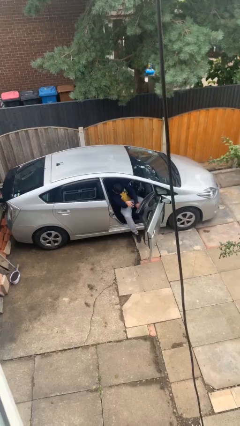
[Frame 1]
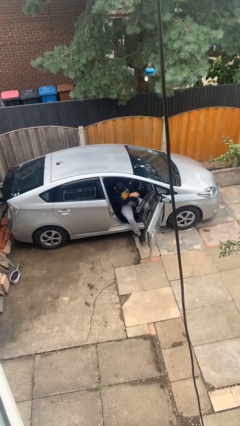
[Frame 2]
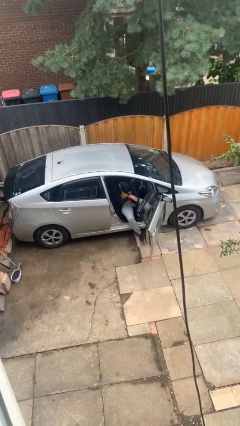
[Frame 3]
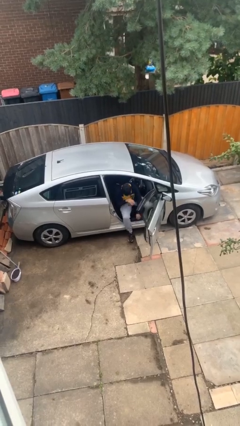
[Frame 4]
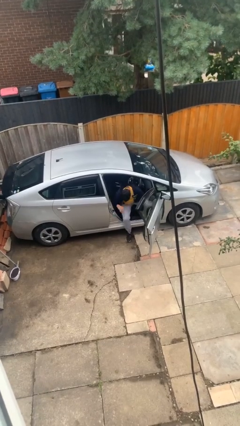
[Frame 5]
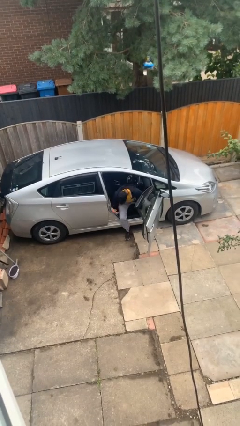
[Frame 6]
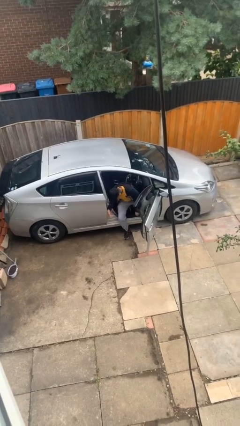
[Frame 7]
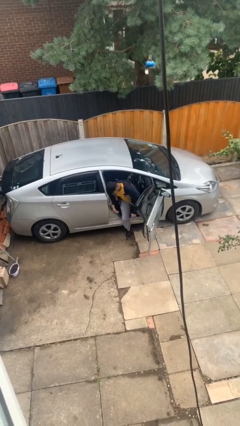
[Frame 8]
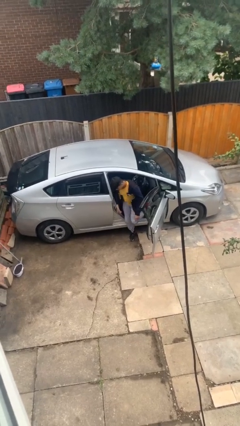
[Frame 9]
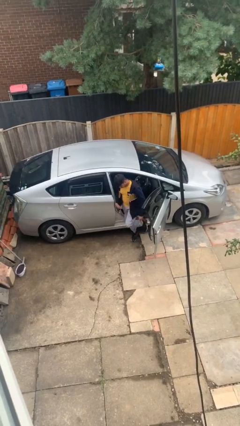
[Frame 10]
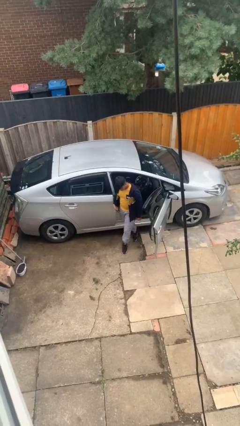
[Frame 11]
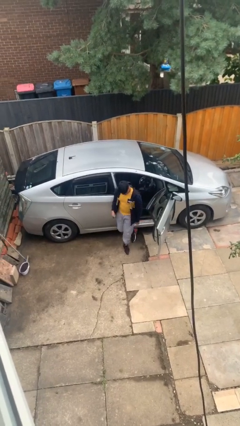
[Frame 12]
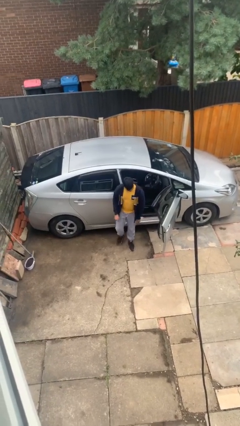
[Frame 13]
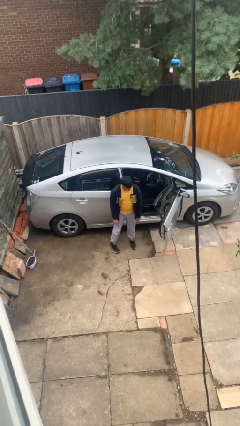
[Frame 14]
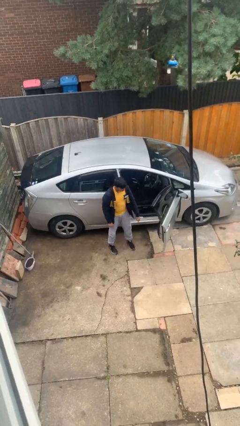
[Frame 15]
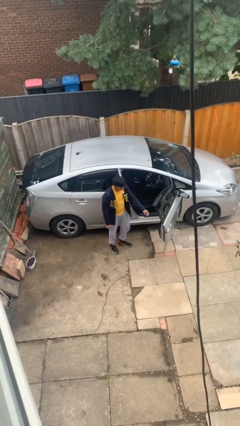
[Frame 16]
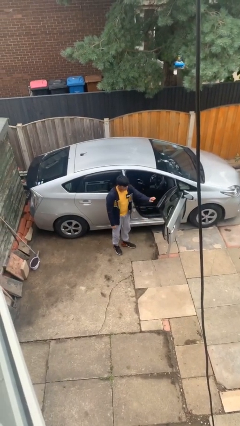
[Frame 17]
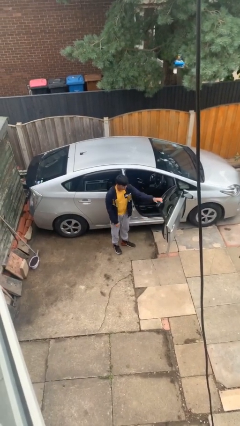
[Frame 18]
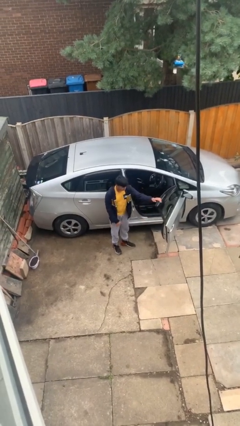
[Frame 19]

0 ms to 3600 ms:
person exits car

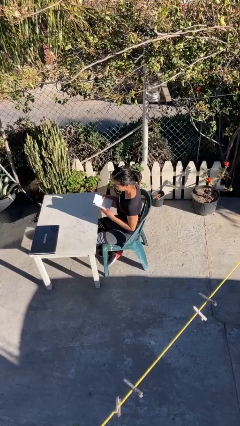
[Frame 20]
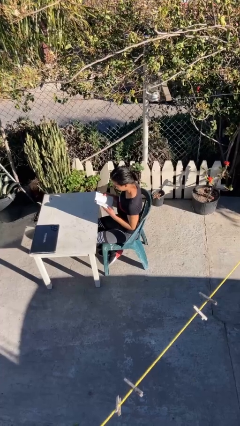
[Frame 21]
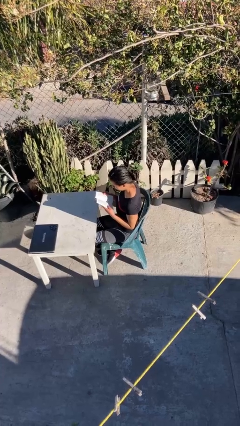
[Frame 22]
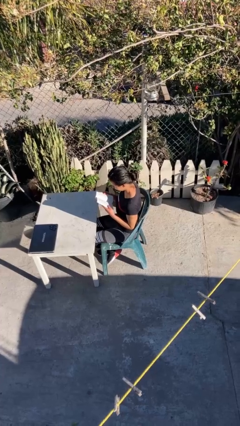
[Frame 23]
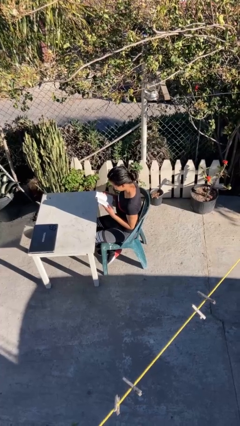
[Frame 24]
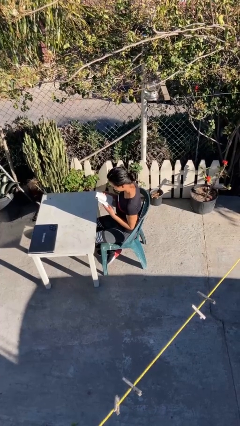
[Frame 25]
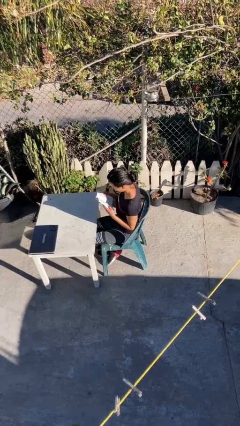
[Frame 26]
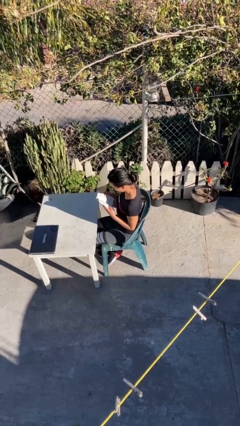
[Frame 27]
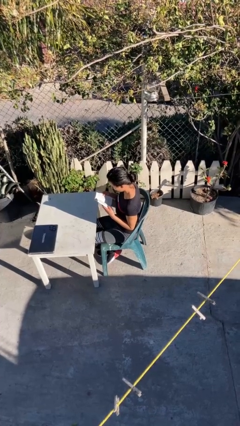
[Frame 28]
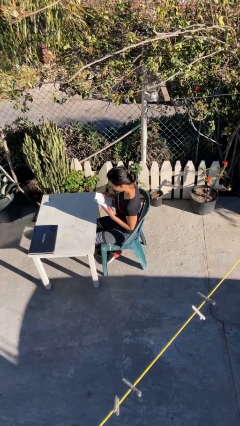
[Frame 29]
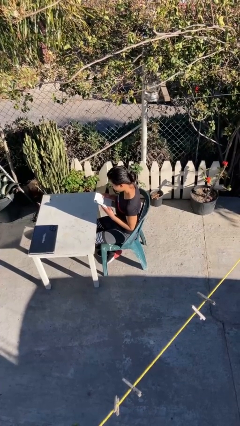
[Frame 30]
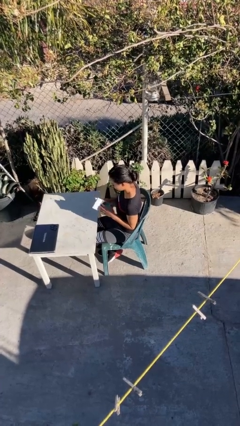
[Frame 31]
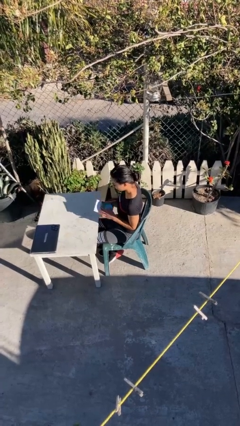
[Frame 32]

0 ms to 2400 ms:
person reads document

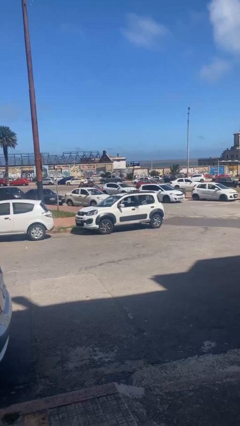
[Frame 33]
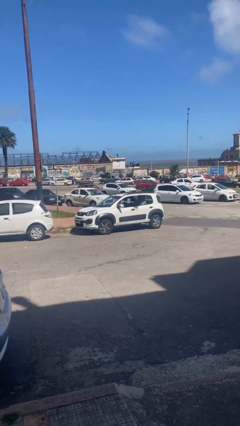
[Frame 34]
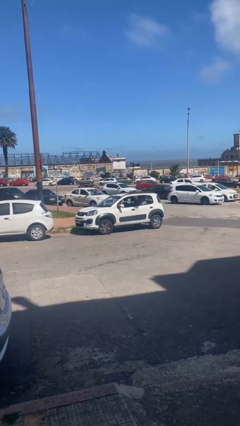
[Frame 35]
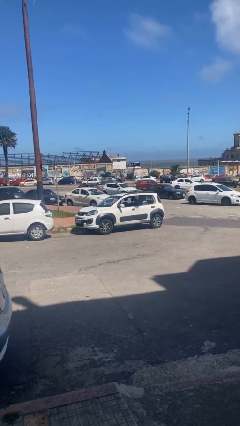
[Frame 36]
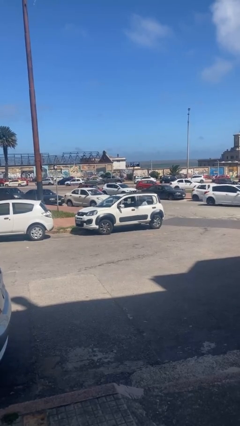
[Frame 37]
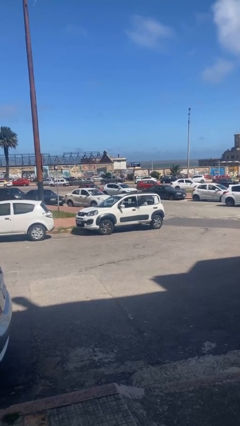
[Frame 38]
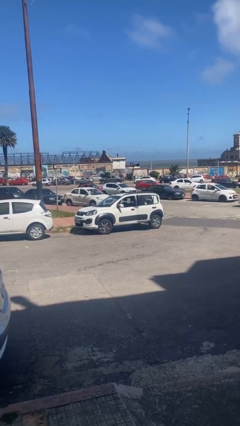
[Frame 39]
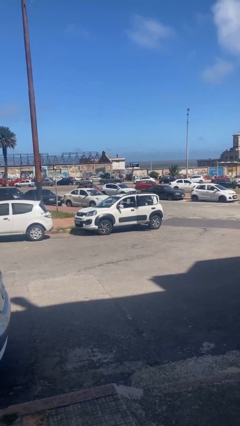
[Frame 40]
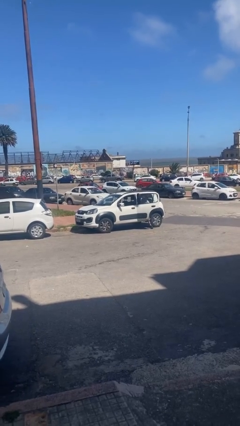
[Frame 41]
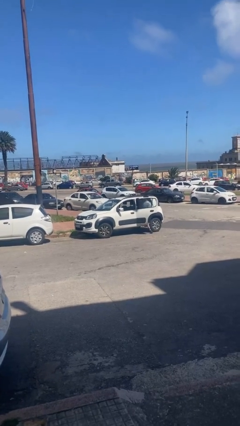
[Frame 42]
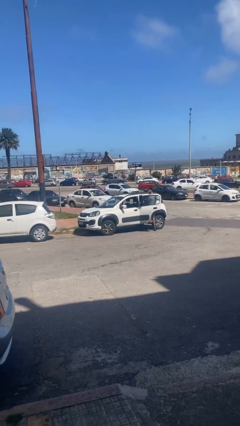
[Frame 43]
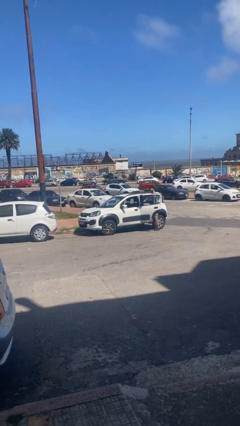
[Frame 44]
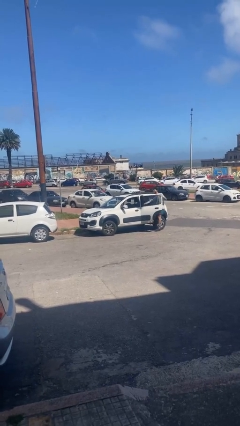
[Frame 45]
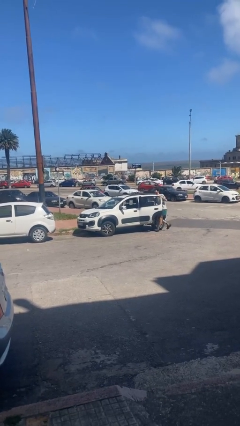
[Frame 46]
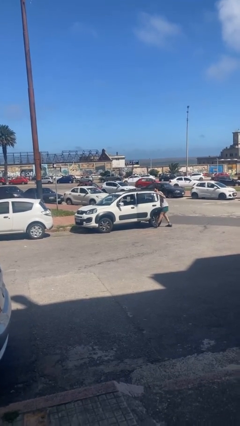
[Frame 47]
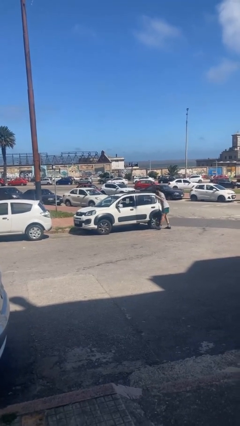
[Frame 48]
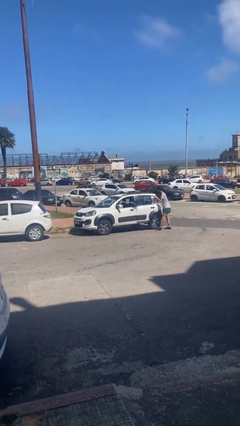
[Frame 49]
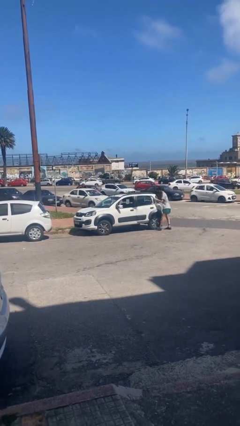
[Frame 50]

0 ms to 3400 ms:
car drops off person

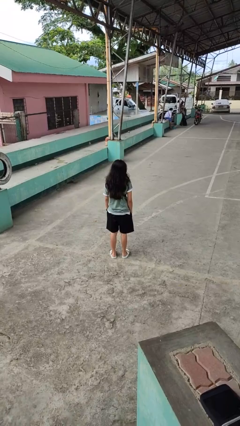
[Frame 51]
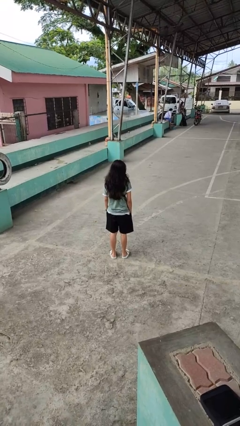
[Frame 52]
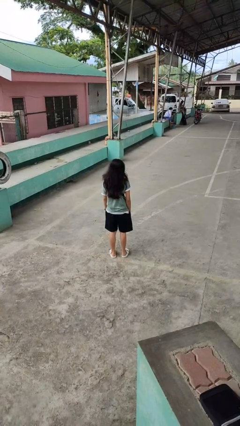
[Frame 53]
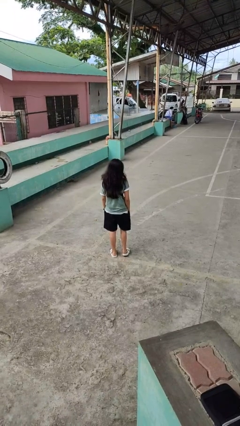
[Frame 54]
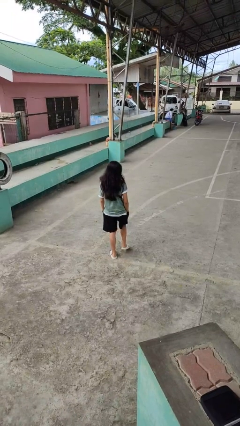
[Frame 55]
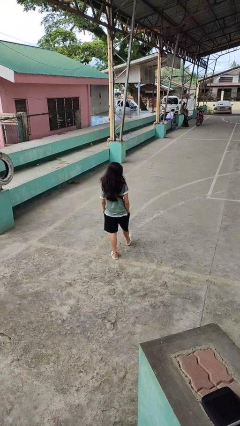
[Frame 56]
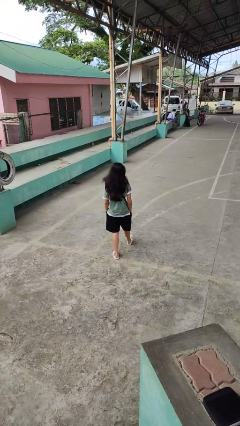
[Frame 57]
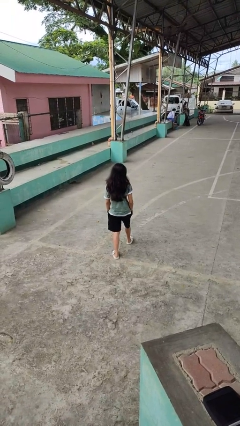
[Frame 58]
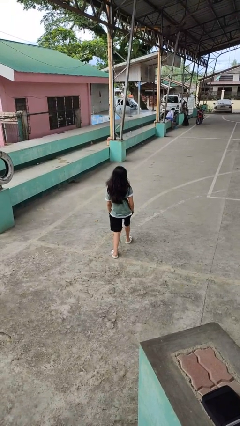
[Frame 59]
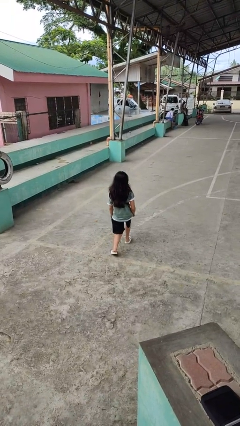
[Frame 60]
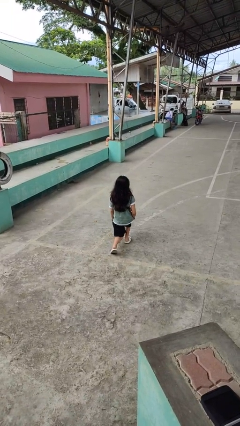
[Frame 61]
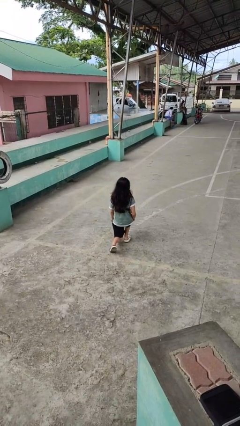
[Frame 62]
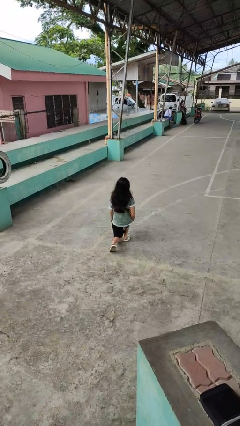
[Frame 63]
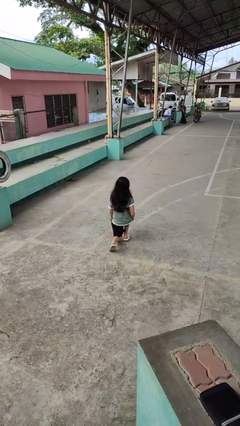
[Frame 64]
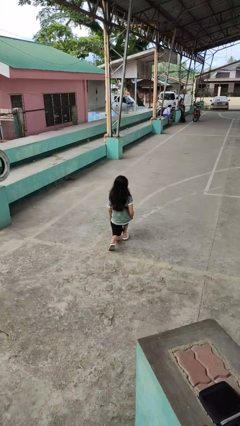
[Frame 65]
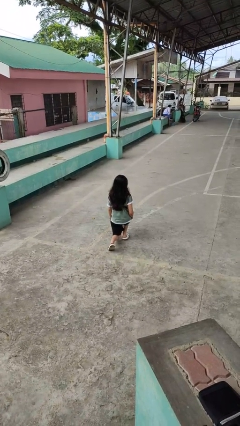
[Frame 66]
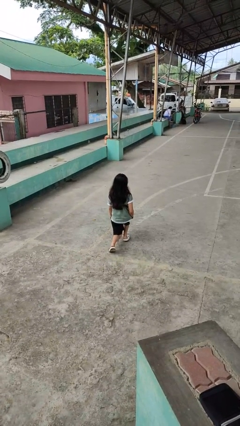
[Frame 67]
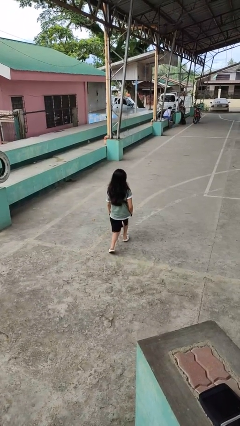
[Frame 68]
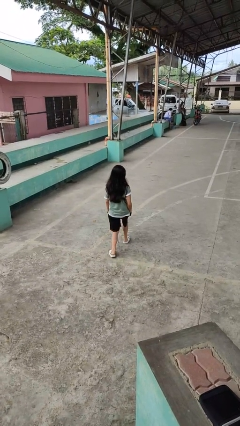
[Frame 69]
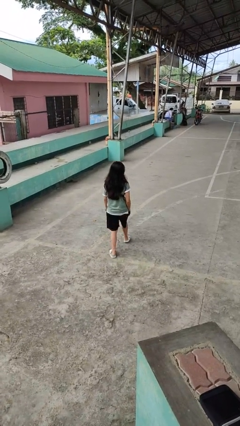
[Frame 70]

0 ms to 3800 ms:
person exercises with lunges

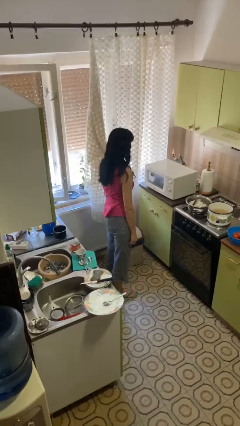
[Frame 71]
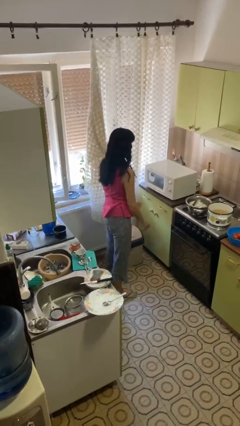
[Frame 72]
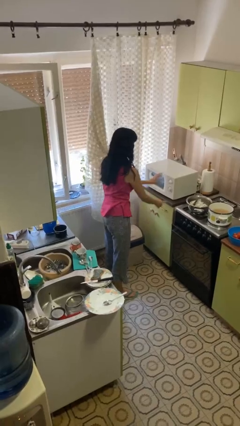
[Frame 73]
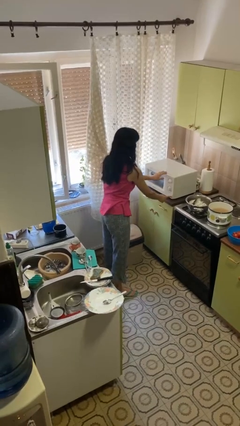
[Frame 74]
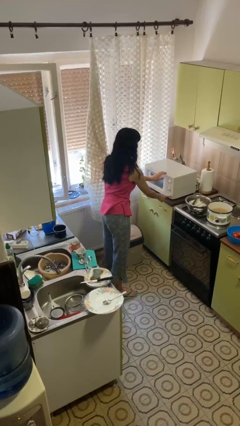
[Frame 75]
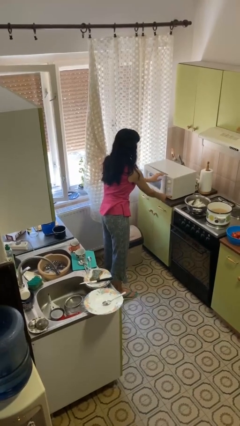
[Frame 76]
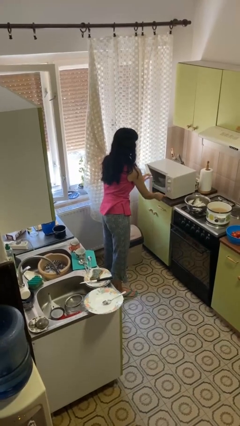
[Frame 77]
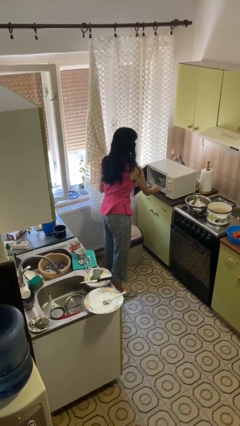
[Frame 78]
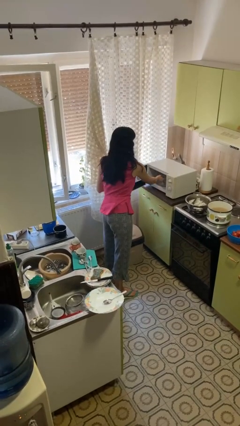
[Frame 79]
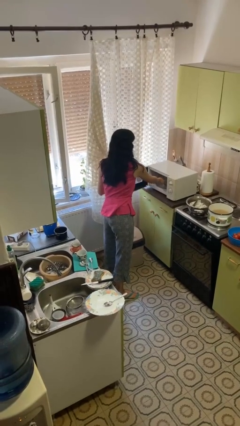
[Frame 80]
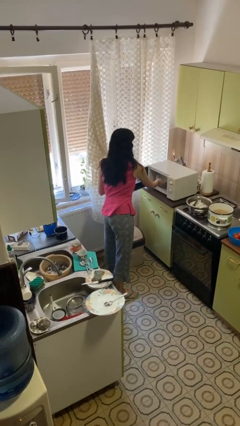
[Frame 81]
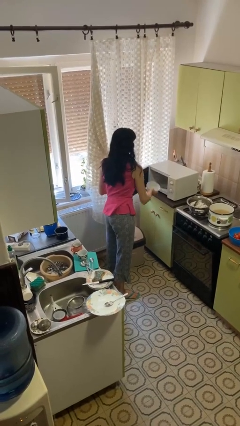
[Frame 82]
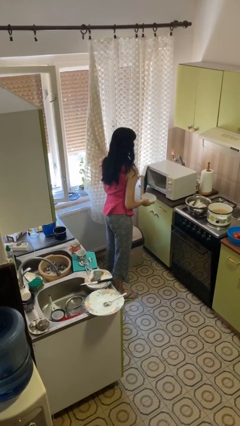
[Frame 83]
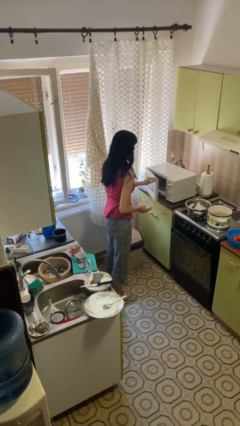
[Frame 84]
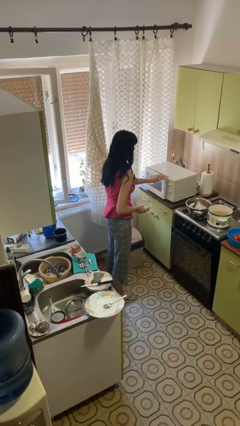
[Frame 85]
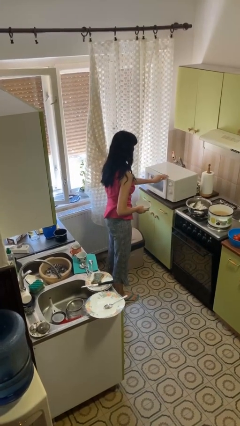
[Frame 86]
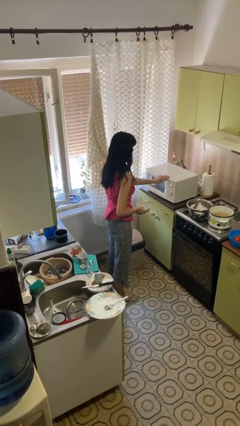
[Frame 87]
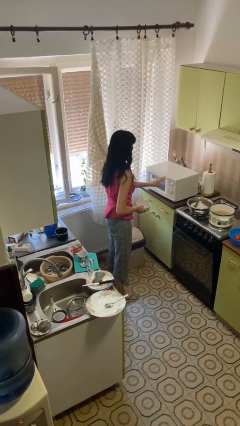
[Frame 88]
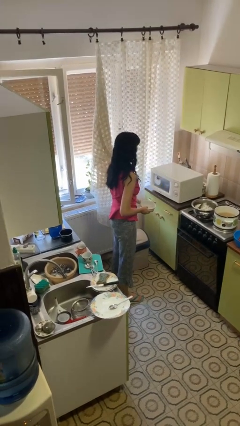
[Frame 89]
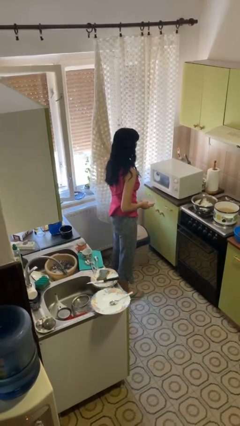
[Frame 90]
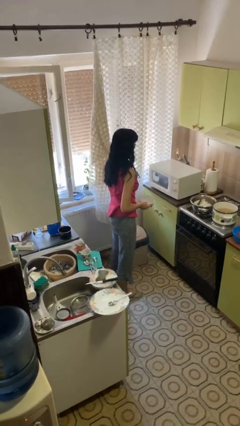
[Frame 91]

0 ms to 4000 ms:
person takes object from microwave

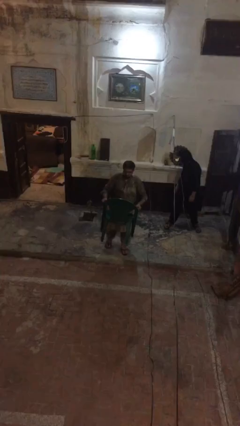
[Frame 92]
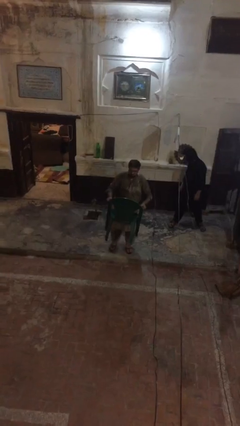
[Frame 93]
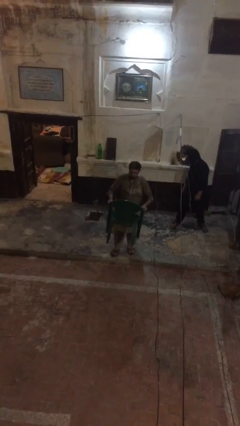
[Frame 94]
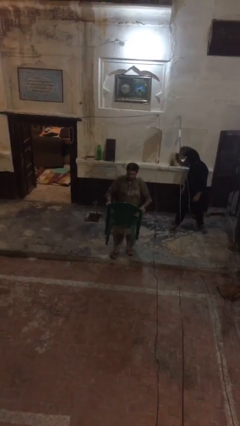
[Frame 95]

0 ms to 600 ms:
person puts down object on floor
